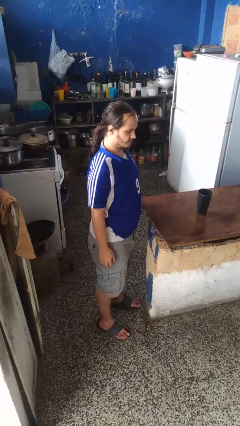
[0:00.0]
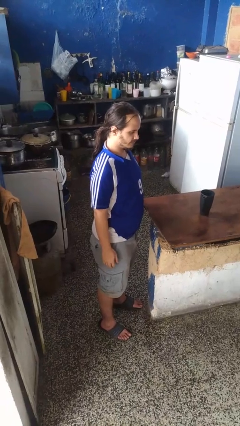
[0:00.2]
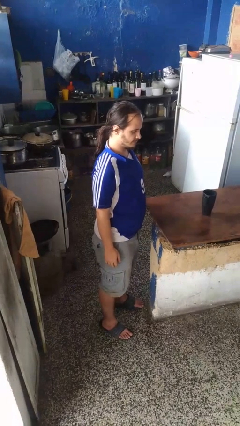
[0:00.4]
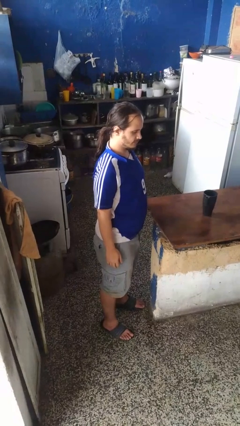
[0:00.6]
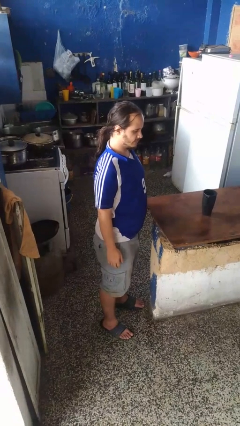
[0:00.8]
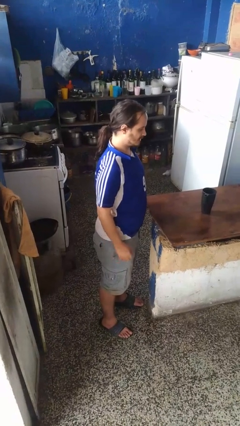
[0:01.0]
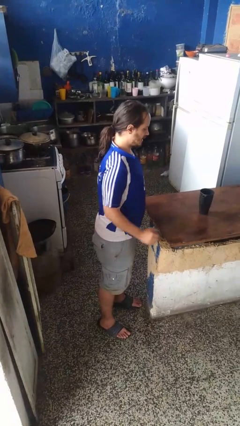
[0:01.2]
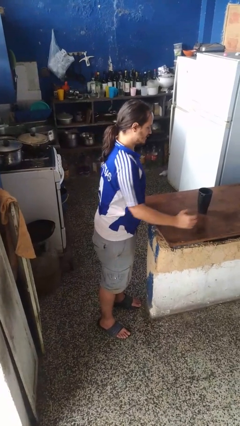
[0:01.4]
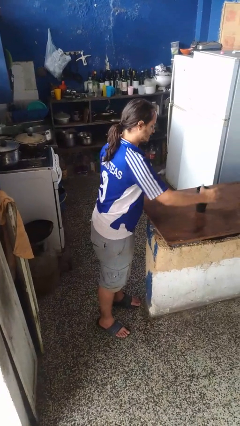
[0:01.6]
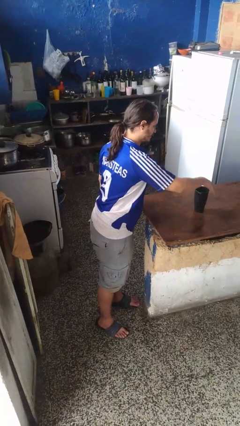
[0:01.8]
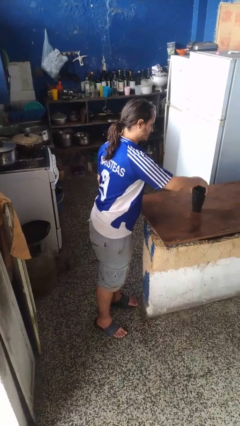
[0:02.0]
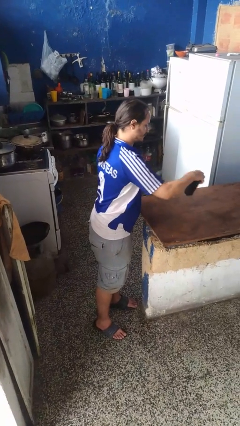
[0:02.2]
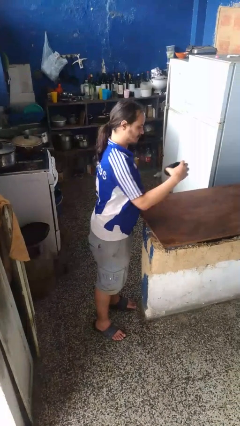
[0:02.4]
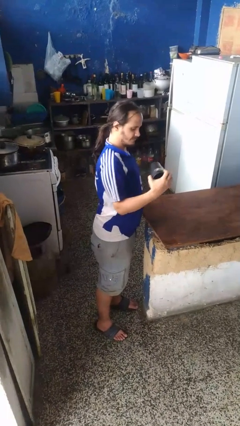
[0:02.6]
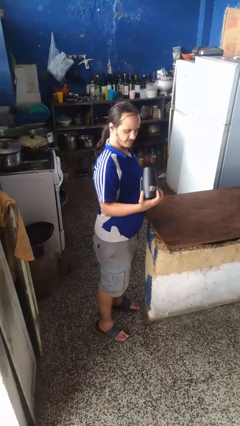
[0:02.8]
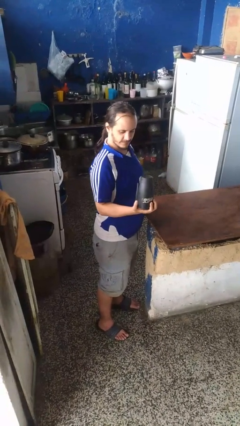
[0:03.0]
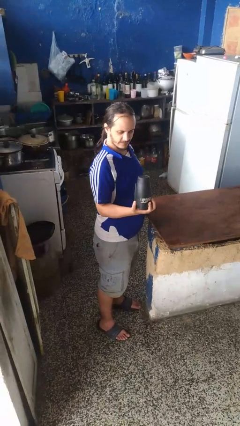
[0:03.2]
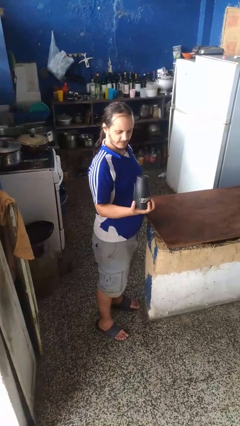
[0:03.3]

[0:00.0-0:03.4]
person picks up object from countertop

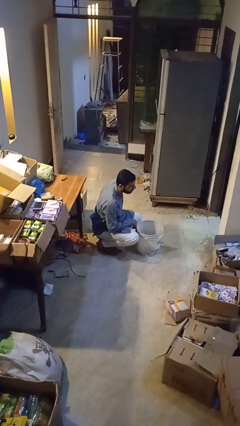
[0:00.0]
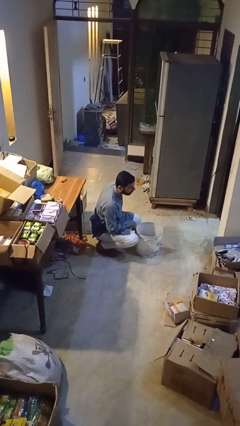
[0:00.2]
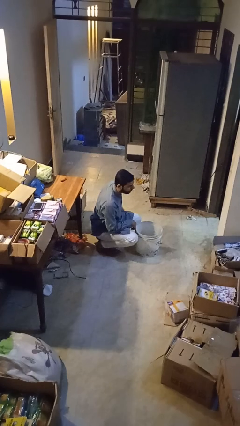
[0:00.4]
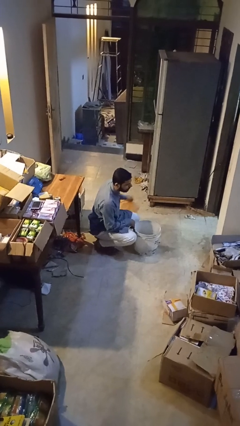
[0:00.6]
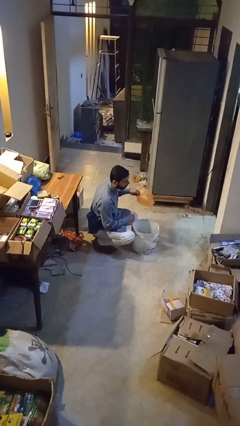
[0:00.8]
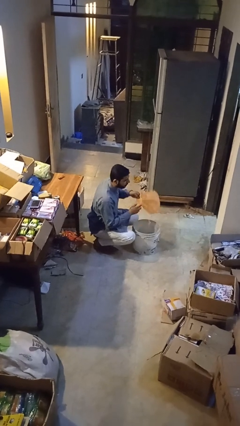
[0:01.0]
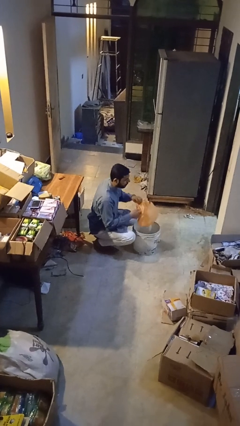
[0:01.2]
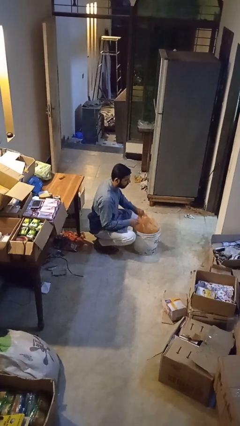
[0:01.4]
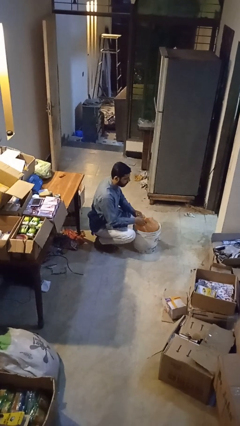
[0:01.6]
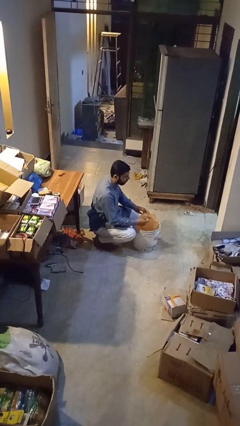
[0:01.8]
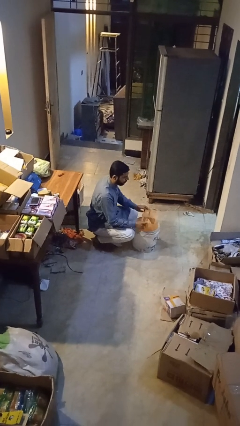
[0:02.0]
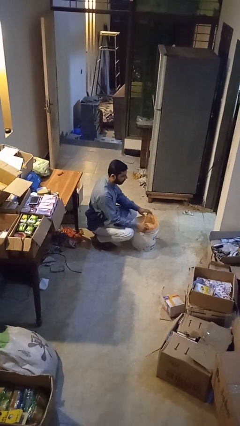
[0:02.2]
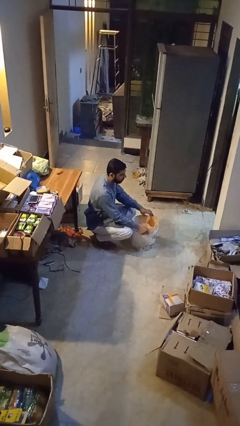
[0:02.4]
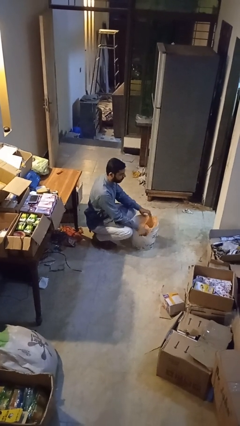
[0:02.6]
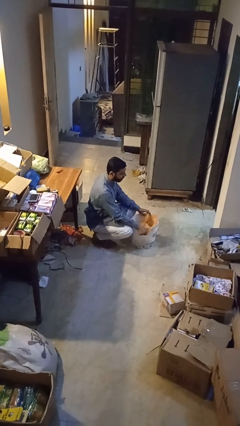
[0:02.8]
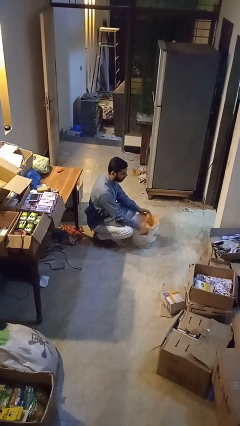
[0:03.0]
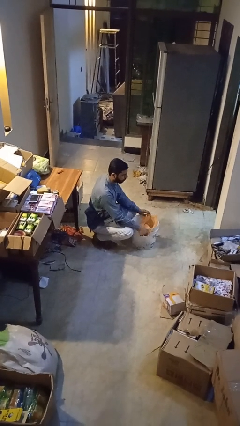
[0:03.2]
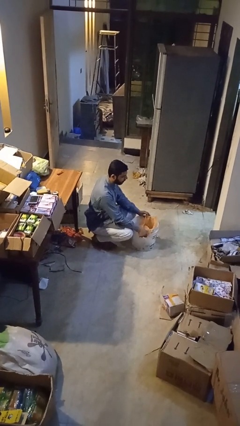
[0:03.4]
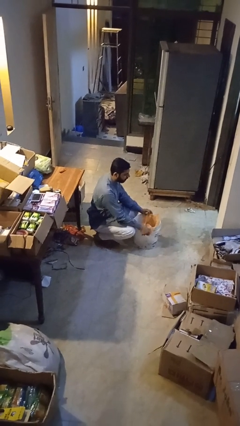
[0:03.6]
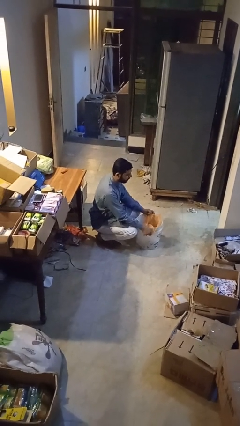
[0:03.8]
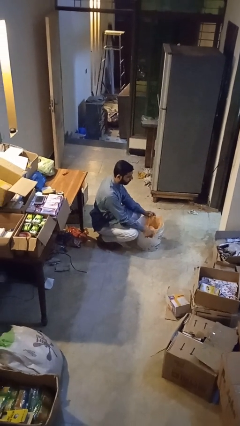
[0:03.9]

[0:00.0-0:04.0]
person inserts trashbag into trashcan

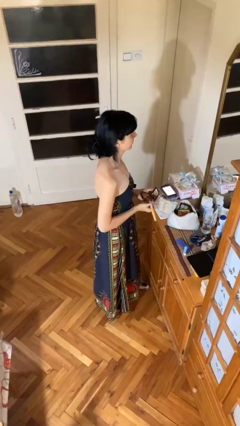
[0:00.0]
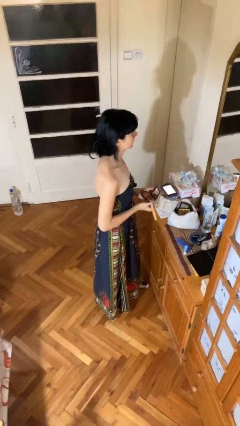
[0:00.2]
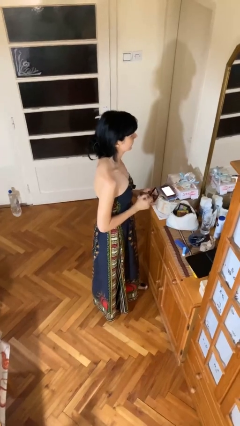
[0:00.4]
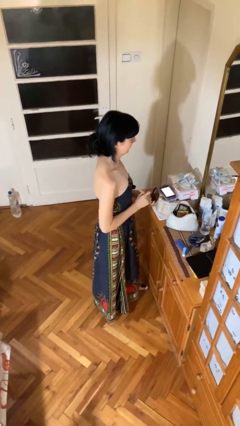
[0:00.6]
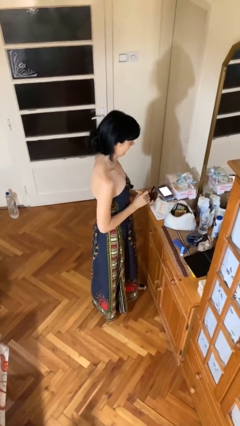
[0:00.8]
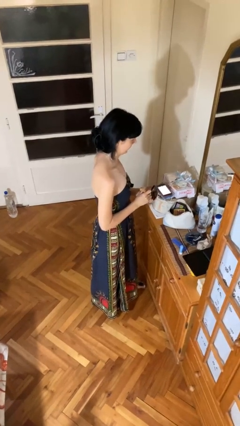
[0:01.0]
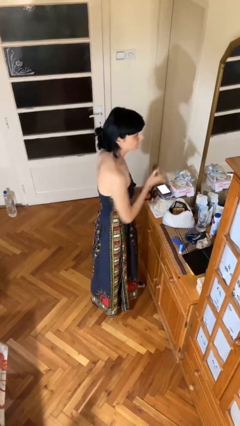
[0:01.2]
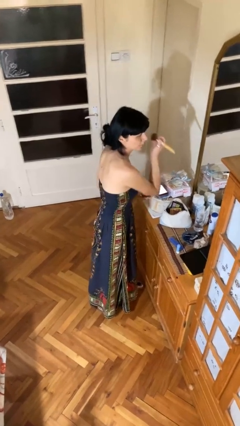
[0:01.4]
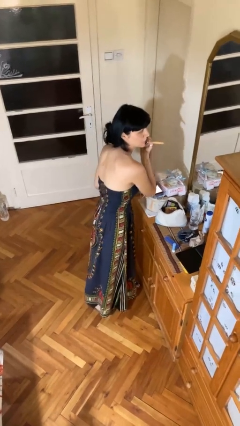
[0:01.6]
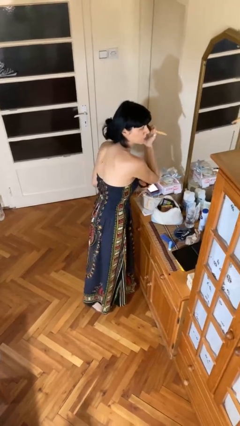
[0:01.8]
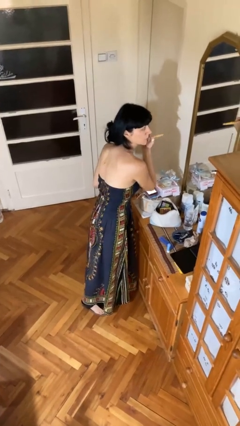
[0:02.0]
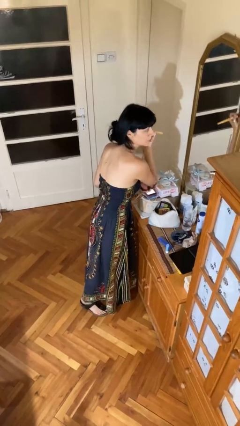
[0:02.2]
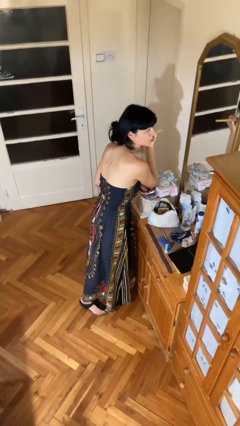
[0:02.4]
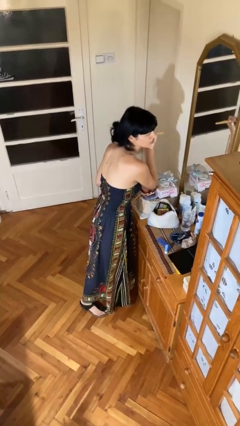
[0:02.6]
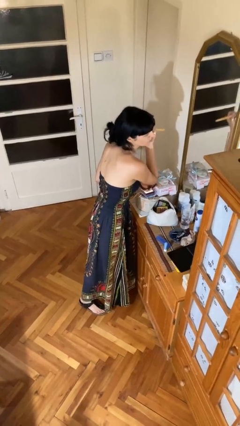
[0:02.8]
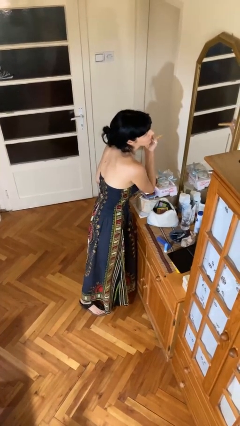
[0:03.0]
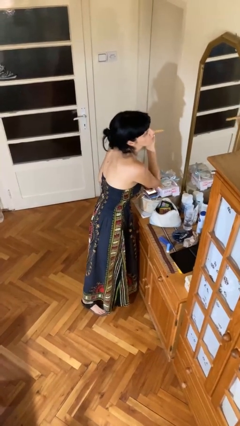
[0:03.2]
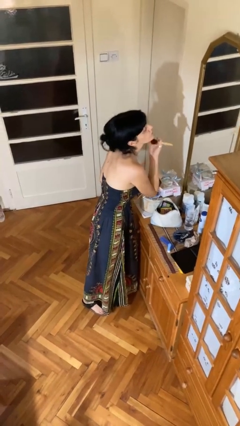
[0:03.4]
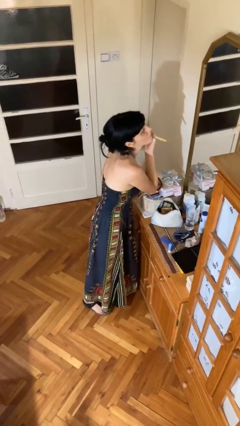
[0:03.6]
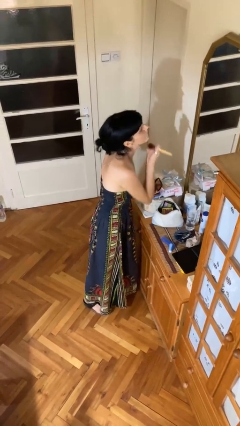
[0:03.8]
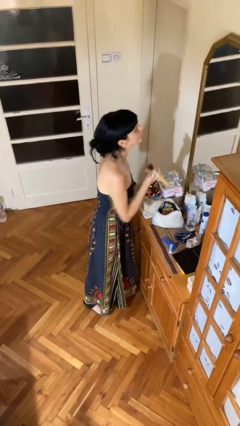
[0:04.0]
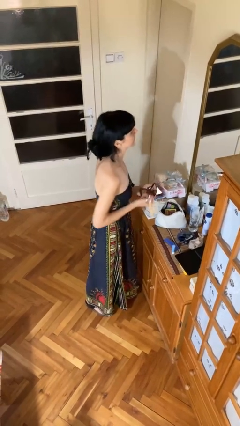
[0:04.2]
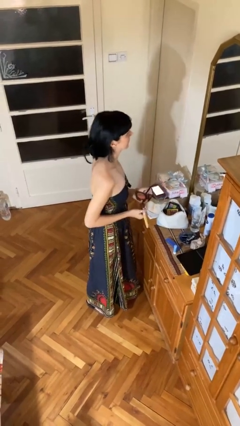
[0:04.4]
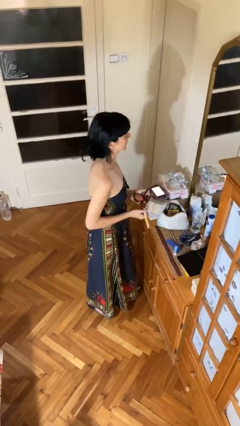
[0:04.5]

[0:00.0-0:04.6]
person applies foundation makeup

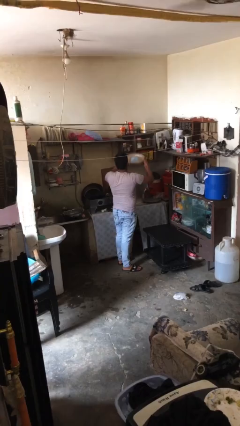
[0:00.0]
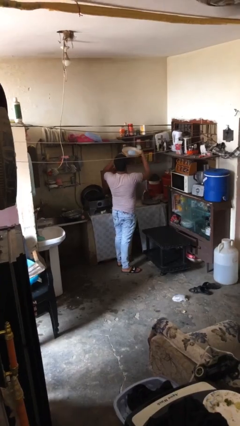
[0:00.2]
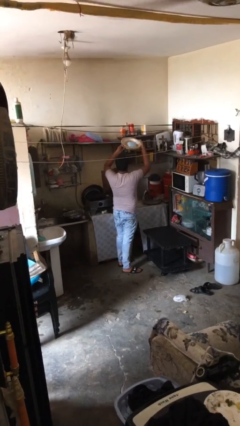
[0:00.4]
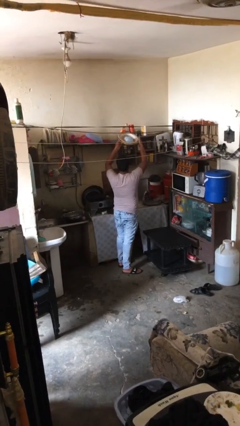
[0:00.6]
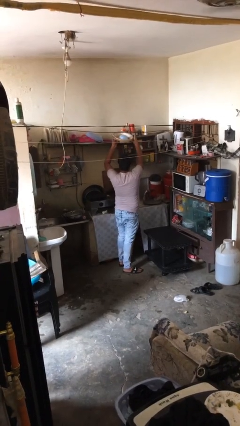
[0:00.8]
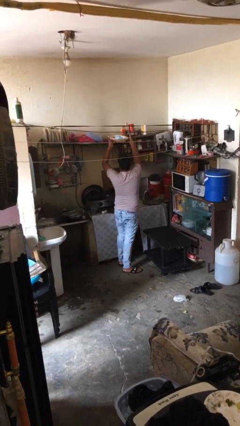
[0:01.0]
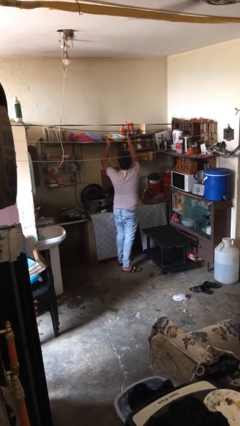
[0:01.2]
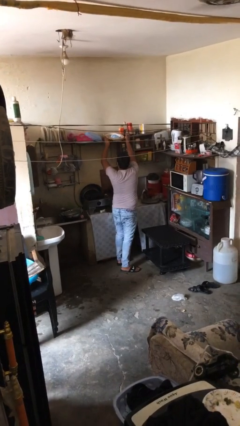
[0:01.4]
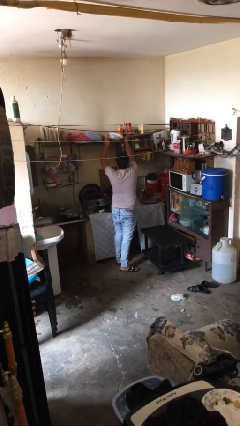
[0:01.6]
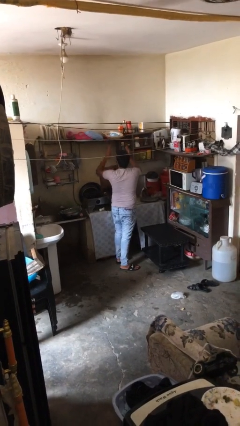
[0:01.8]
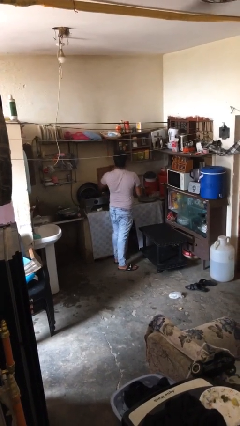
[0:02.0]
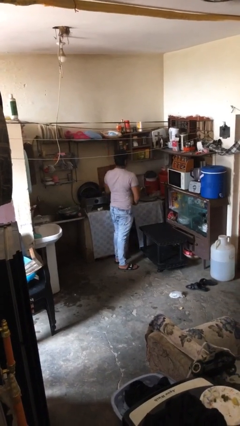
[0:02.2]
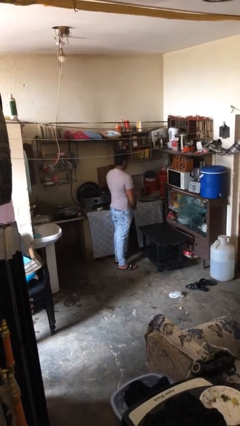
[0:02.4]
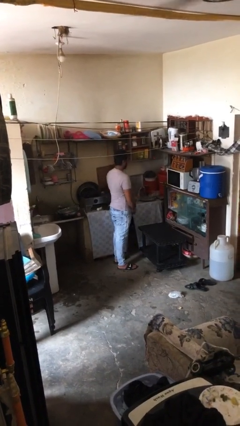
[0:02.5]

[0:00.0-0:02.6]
person puts down object on shelf

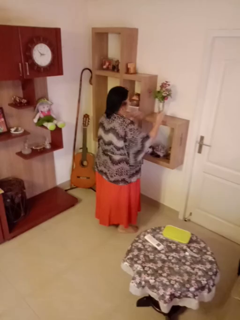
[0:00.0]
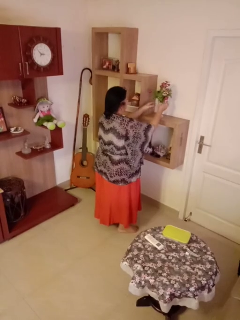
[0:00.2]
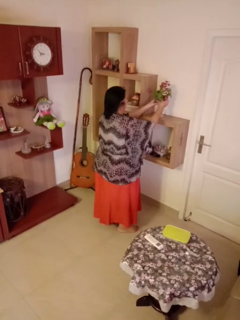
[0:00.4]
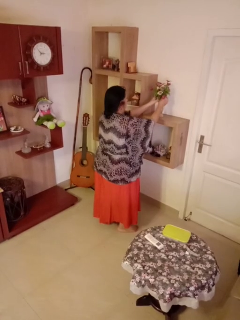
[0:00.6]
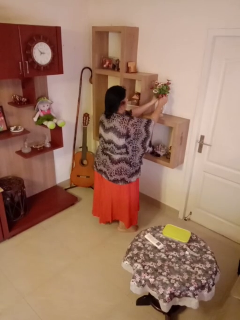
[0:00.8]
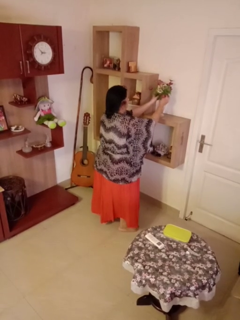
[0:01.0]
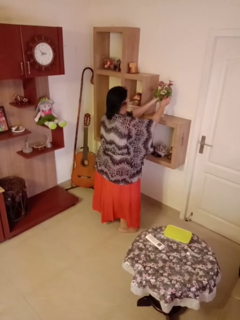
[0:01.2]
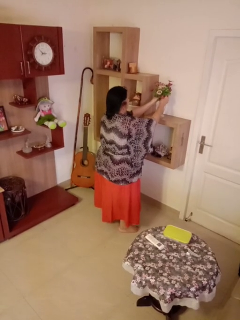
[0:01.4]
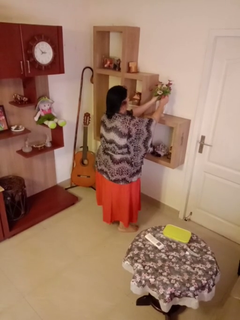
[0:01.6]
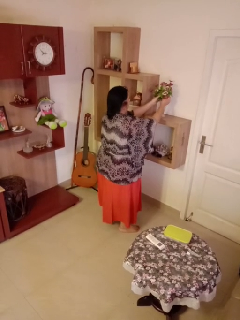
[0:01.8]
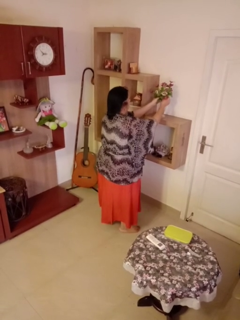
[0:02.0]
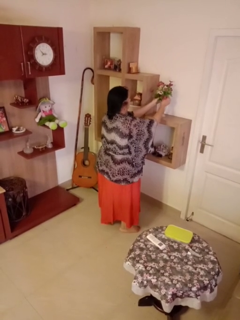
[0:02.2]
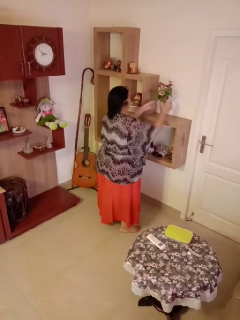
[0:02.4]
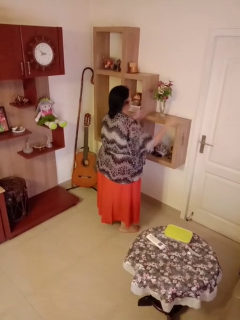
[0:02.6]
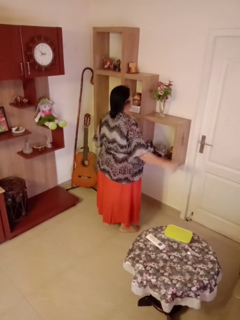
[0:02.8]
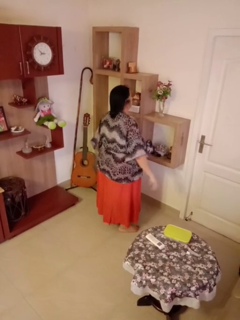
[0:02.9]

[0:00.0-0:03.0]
person arranges flowers in vase

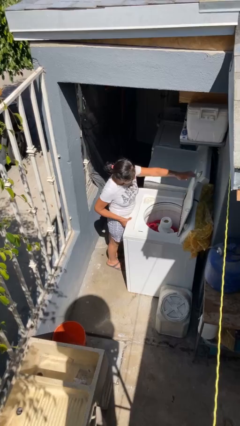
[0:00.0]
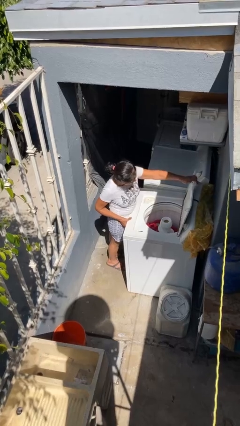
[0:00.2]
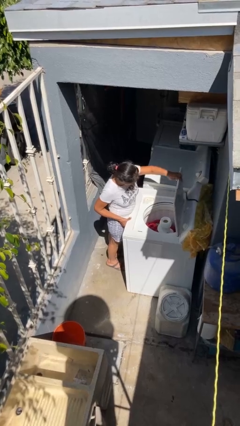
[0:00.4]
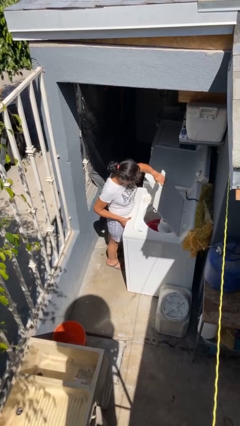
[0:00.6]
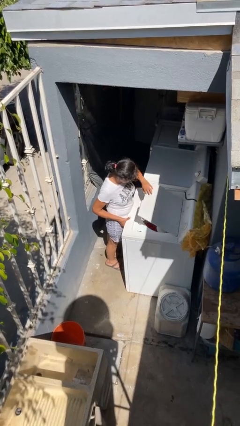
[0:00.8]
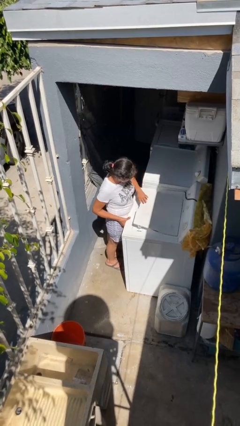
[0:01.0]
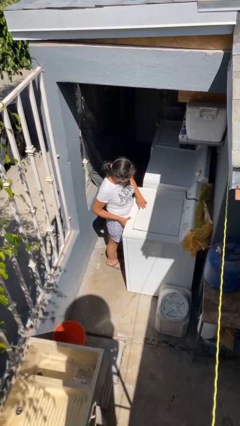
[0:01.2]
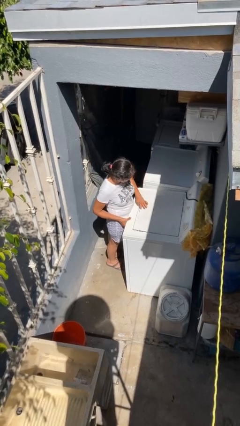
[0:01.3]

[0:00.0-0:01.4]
person closes clothes washer
